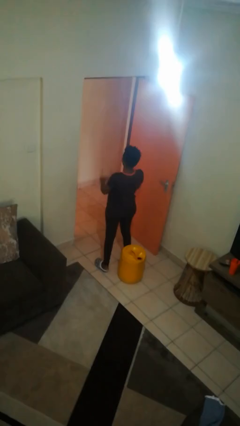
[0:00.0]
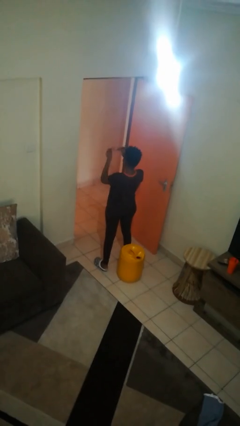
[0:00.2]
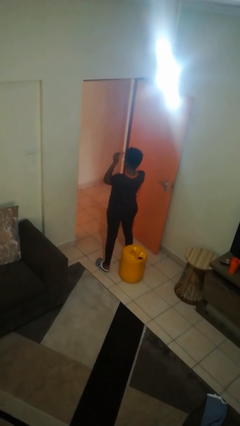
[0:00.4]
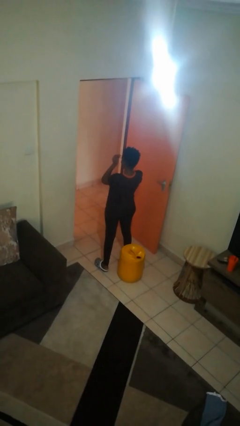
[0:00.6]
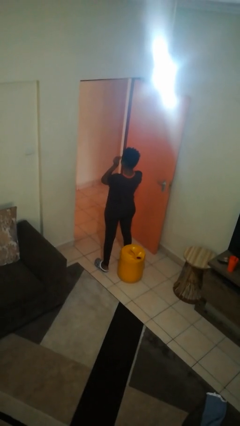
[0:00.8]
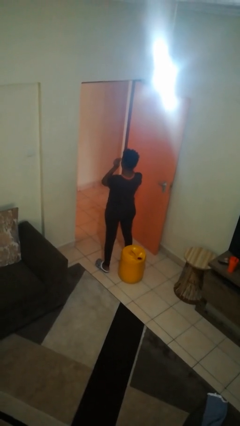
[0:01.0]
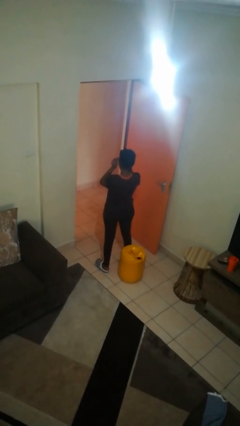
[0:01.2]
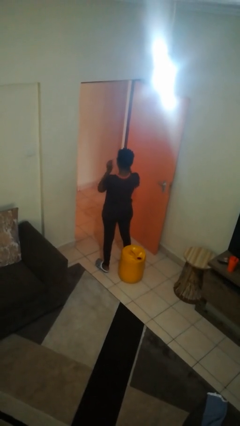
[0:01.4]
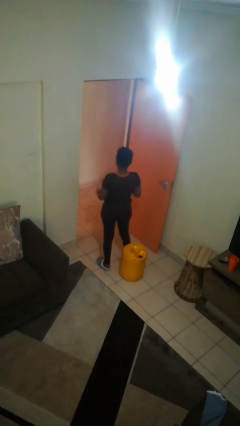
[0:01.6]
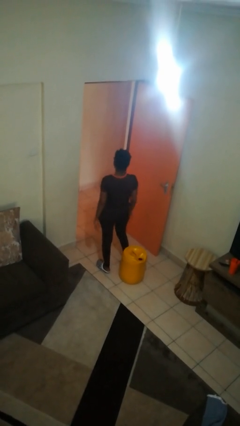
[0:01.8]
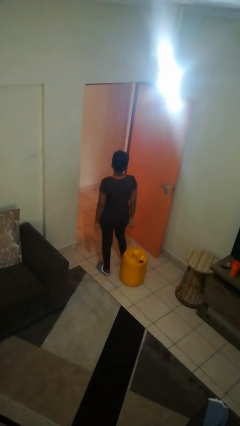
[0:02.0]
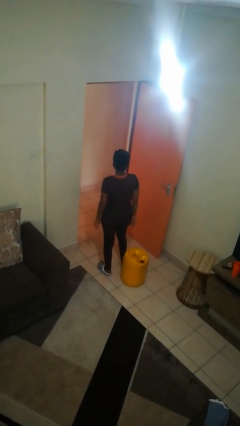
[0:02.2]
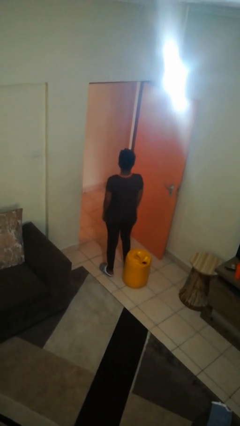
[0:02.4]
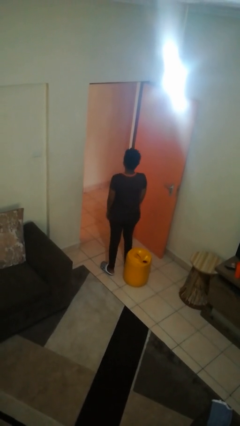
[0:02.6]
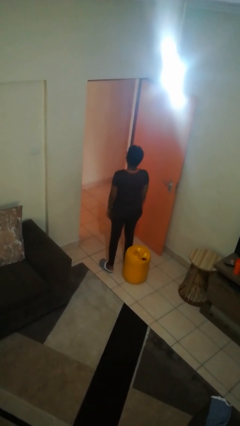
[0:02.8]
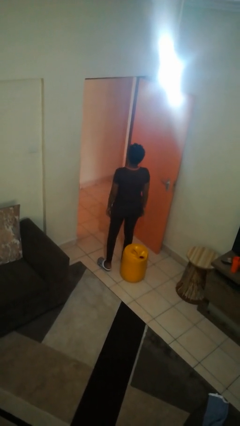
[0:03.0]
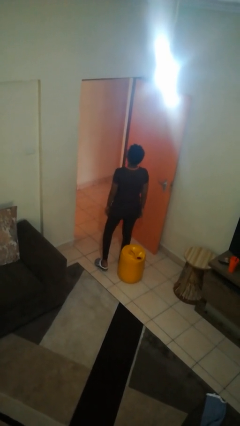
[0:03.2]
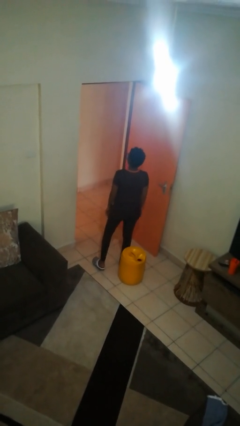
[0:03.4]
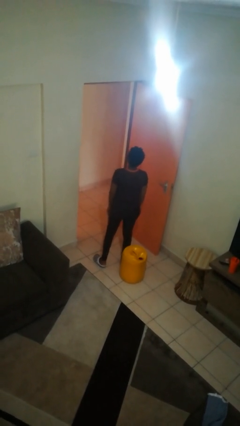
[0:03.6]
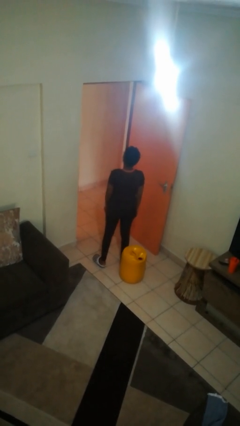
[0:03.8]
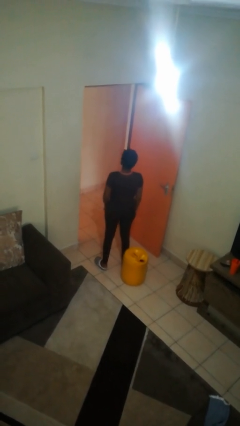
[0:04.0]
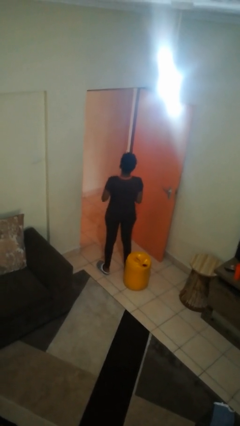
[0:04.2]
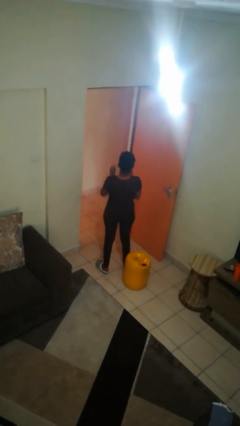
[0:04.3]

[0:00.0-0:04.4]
person puts on glasses

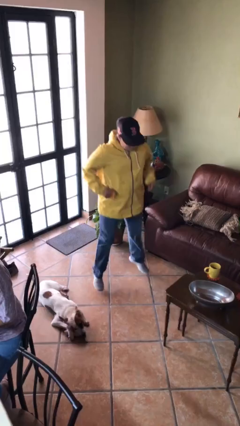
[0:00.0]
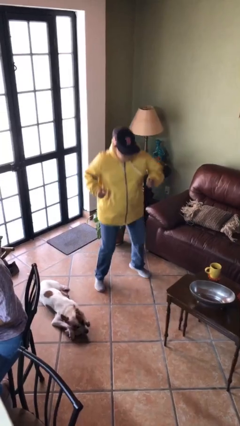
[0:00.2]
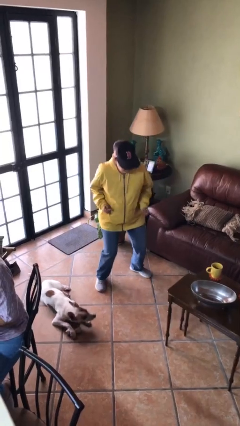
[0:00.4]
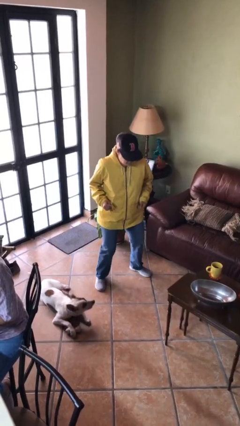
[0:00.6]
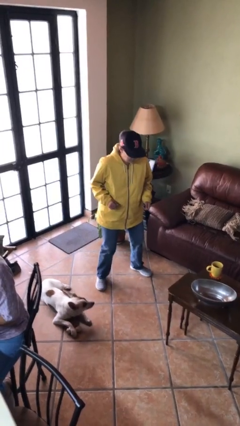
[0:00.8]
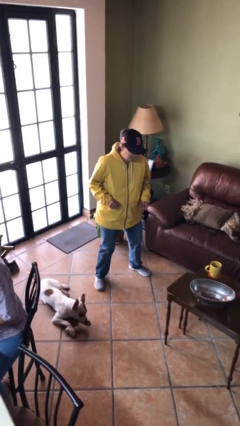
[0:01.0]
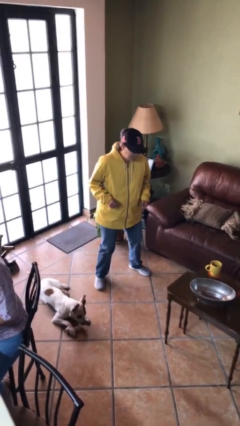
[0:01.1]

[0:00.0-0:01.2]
person jumps

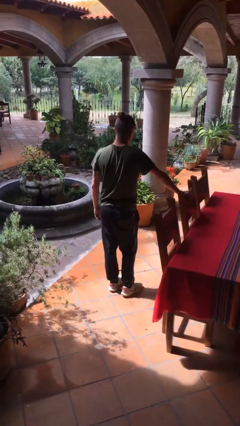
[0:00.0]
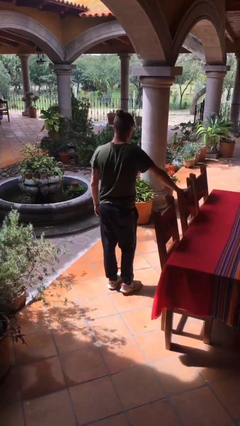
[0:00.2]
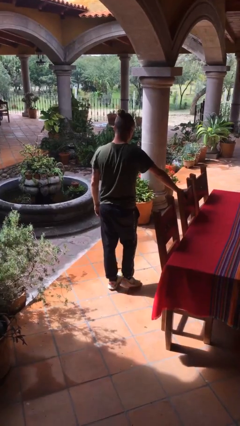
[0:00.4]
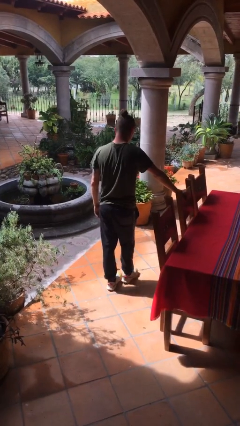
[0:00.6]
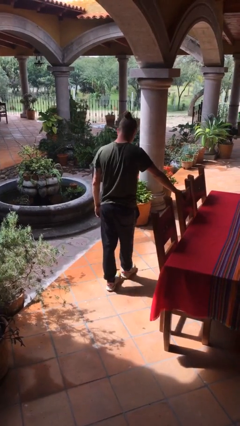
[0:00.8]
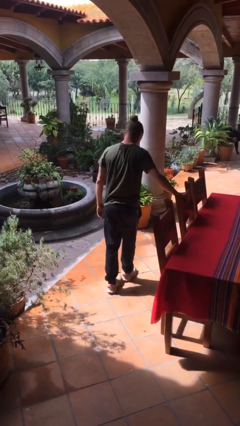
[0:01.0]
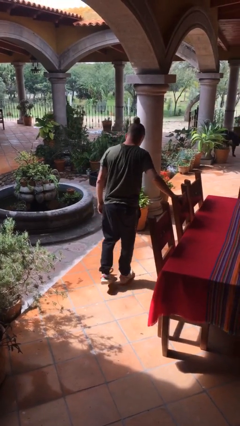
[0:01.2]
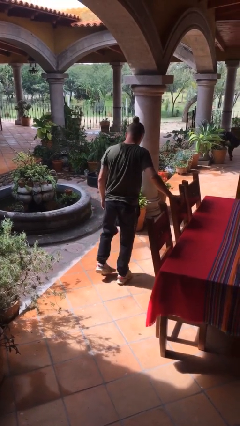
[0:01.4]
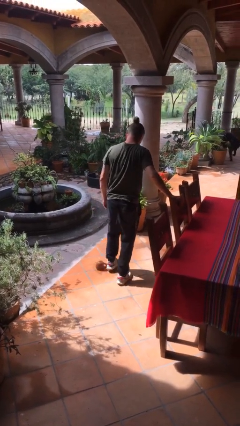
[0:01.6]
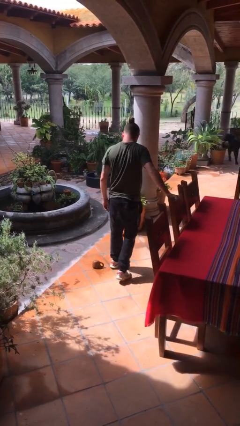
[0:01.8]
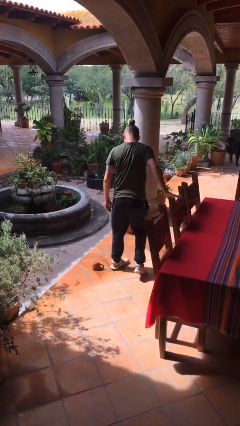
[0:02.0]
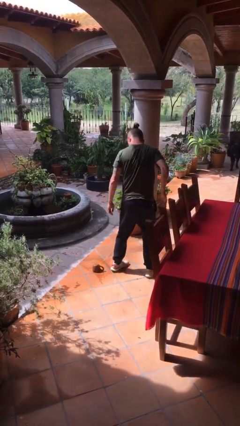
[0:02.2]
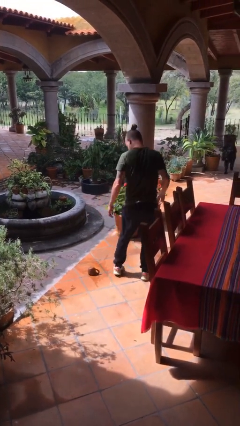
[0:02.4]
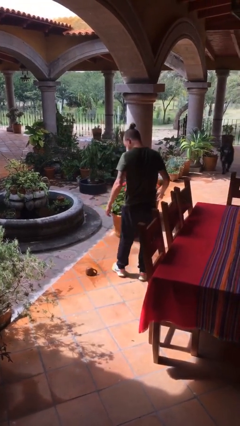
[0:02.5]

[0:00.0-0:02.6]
person spills on floor

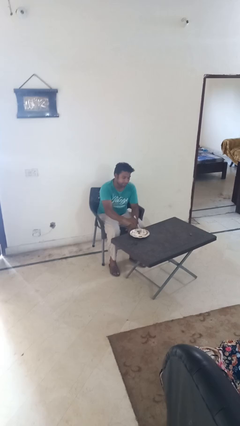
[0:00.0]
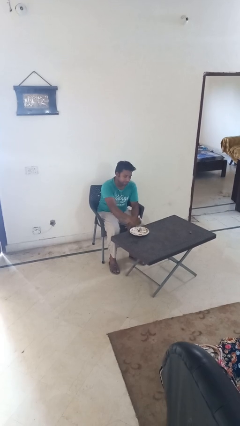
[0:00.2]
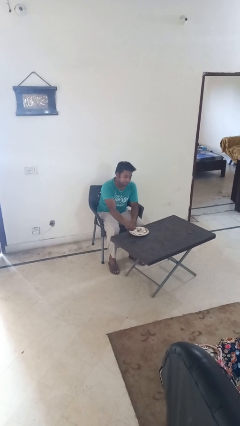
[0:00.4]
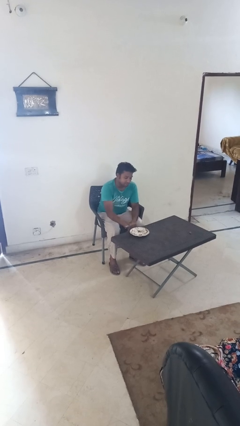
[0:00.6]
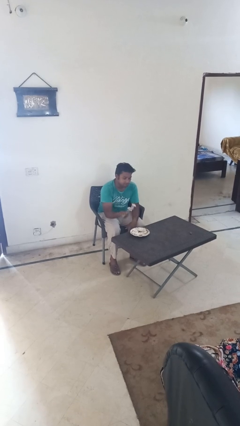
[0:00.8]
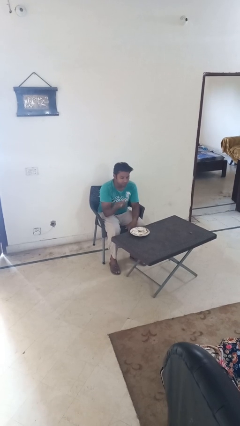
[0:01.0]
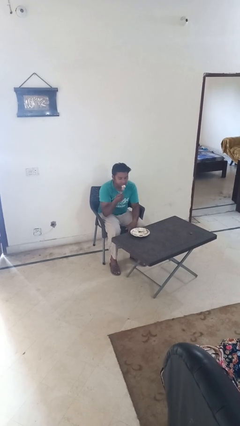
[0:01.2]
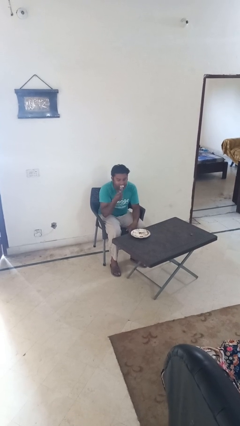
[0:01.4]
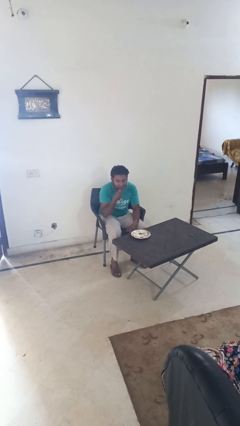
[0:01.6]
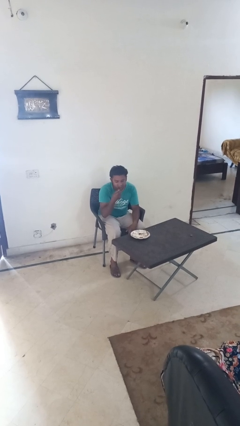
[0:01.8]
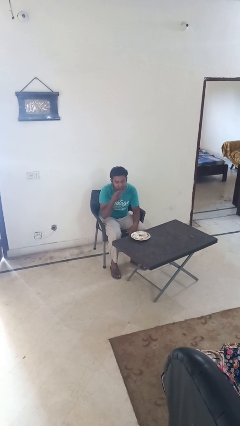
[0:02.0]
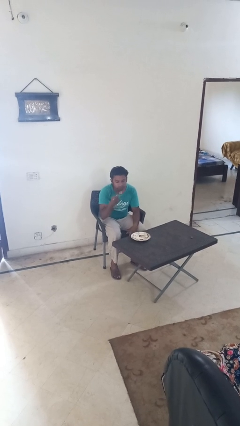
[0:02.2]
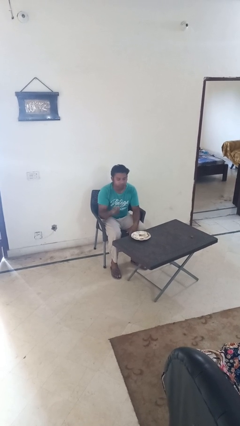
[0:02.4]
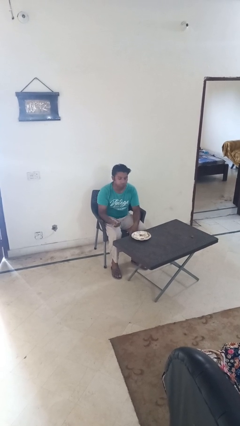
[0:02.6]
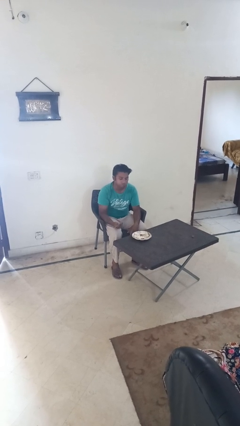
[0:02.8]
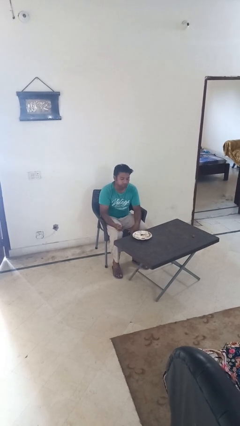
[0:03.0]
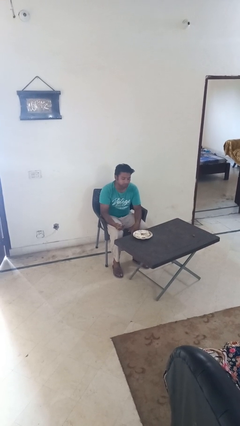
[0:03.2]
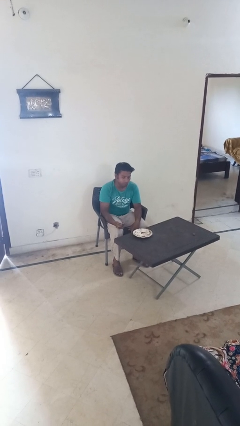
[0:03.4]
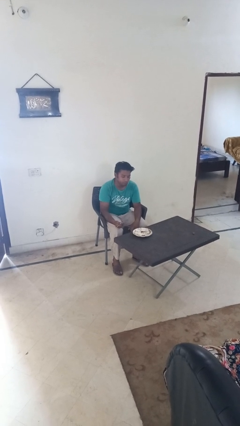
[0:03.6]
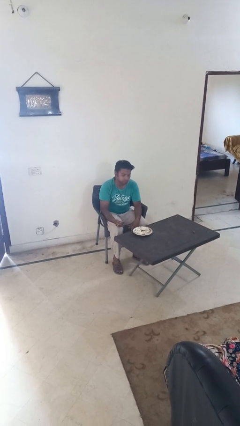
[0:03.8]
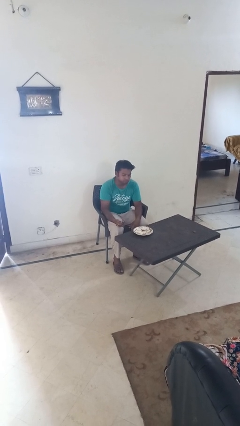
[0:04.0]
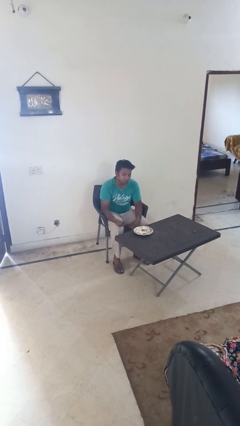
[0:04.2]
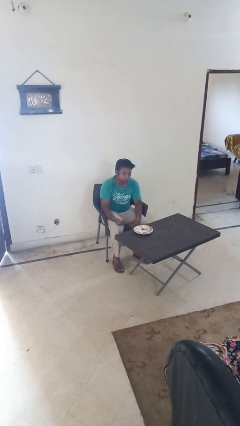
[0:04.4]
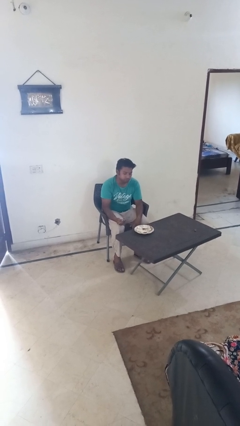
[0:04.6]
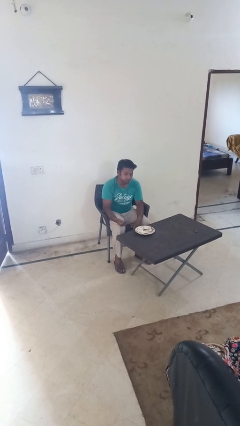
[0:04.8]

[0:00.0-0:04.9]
person eats with utensil

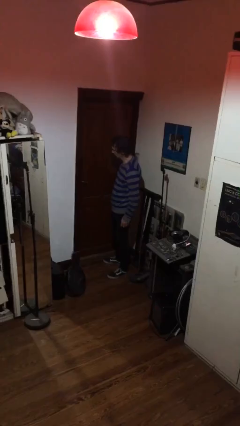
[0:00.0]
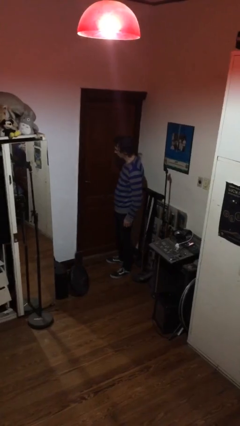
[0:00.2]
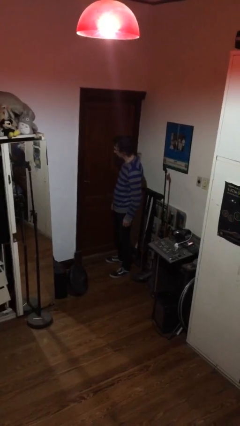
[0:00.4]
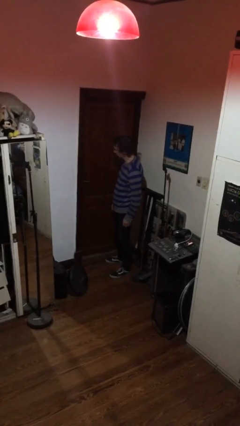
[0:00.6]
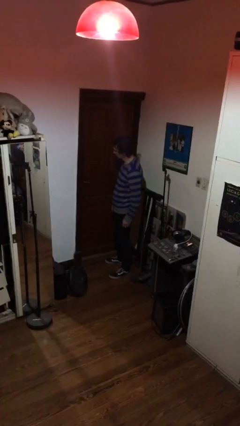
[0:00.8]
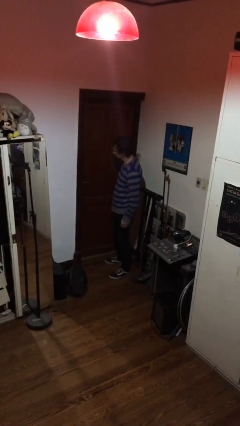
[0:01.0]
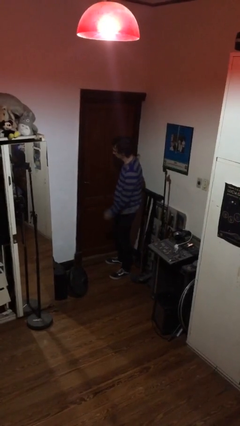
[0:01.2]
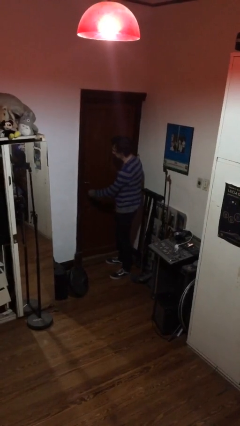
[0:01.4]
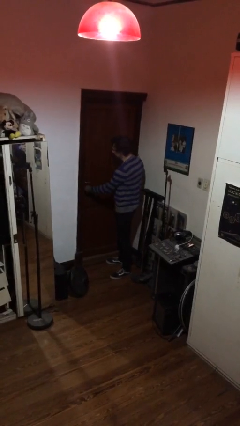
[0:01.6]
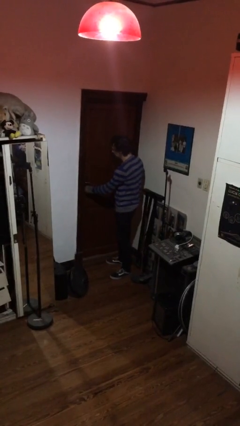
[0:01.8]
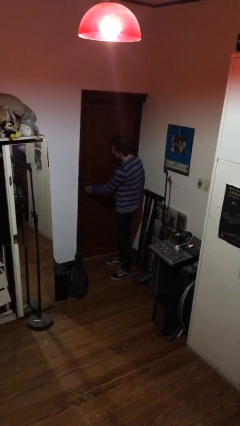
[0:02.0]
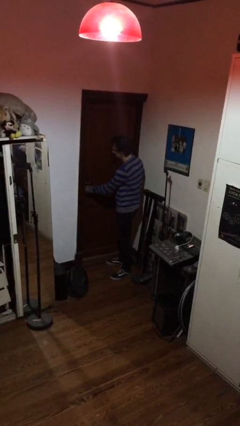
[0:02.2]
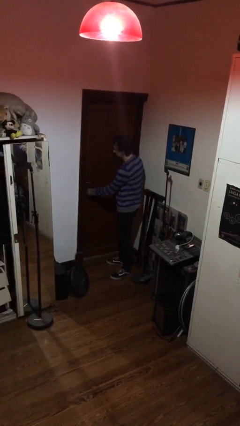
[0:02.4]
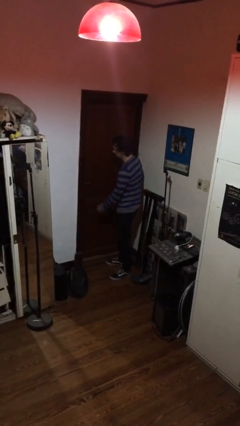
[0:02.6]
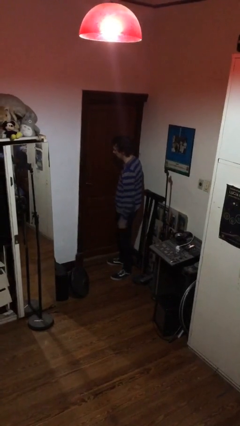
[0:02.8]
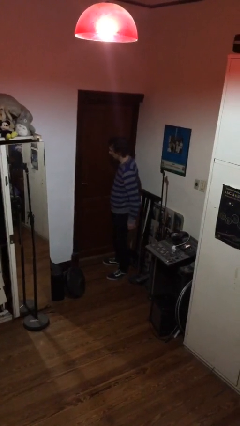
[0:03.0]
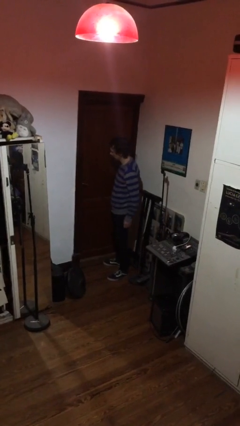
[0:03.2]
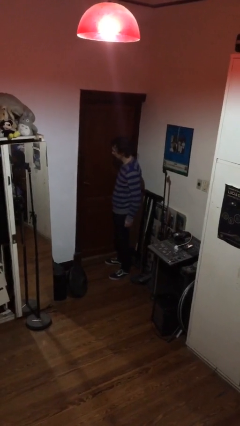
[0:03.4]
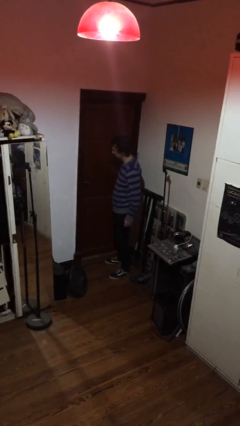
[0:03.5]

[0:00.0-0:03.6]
person unlocks door with keys

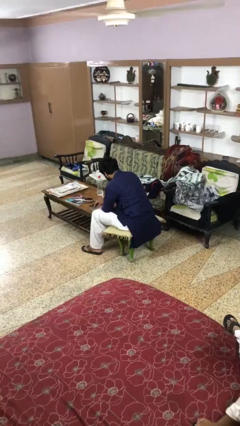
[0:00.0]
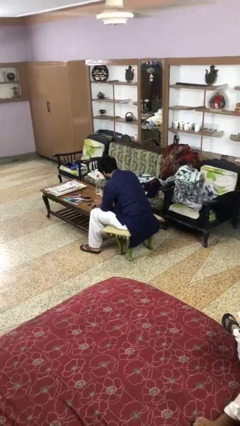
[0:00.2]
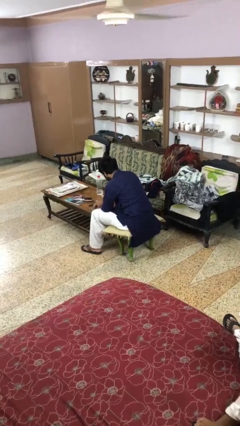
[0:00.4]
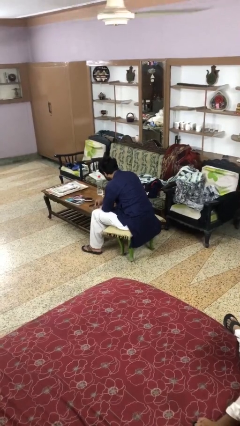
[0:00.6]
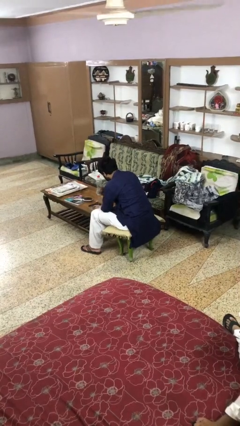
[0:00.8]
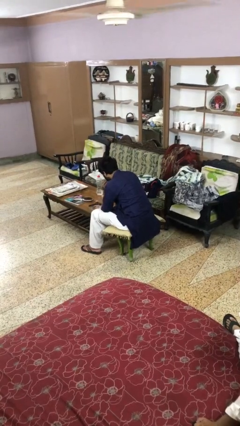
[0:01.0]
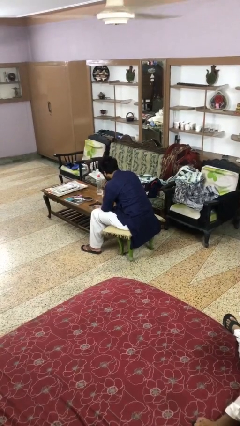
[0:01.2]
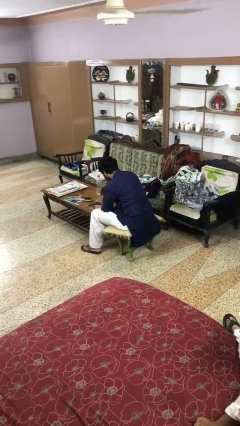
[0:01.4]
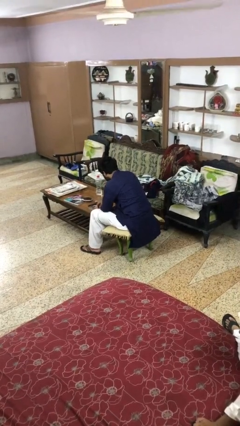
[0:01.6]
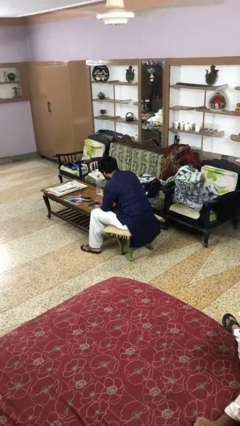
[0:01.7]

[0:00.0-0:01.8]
person eats with hands
